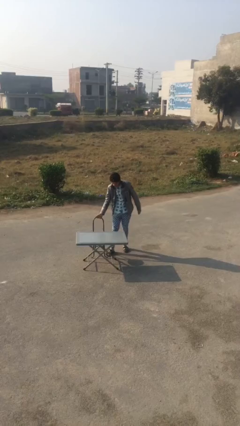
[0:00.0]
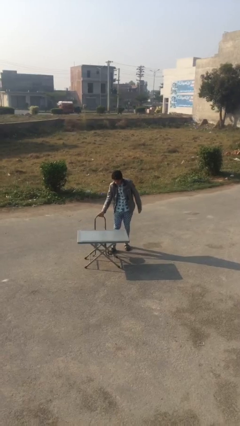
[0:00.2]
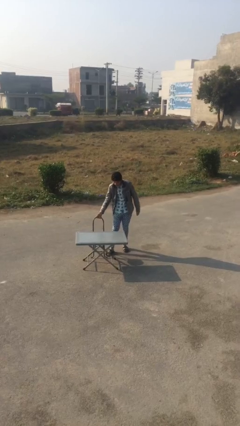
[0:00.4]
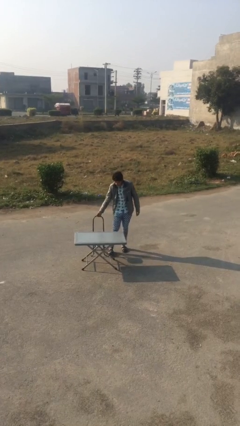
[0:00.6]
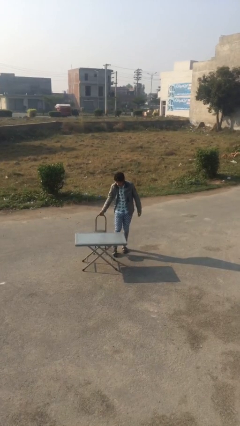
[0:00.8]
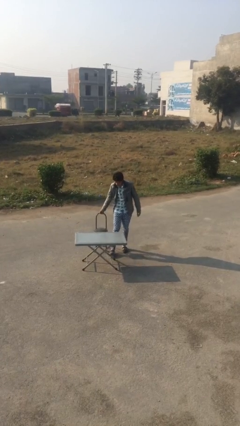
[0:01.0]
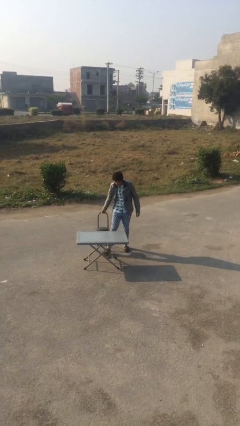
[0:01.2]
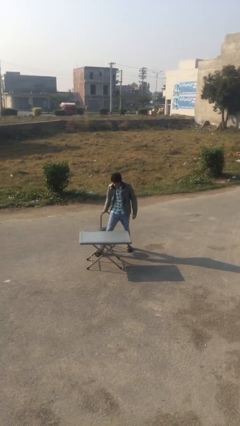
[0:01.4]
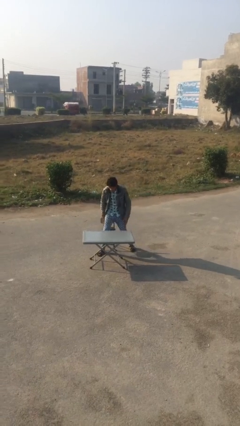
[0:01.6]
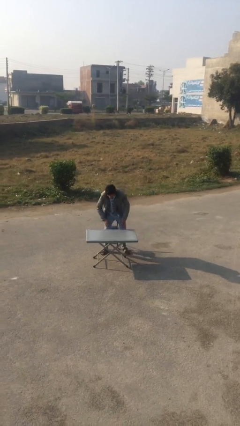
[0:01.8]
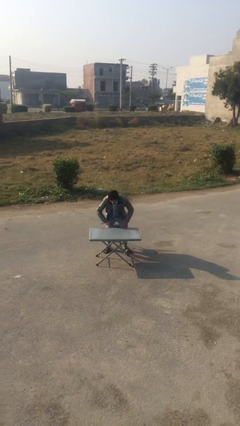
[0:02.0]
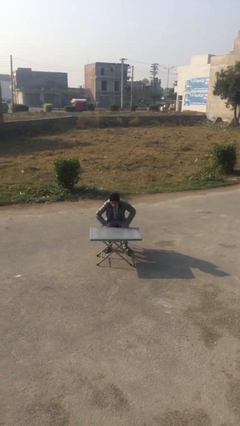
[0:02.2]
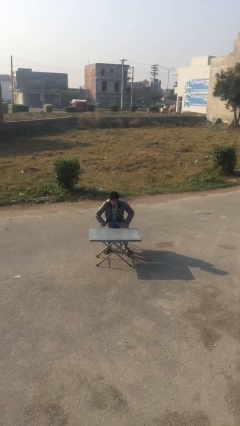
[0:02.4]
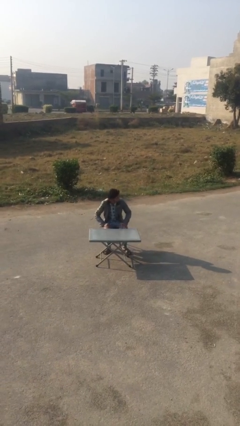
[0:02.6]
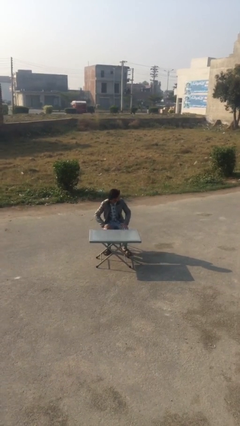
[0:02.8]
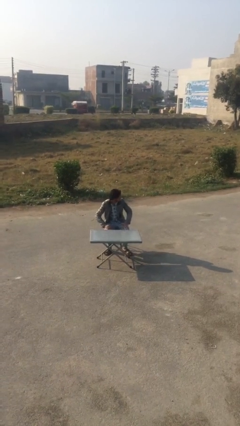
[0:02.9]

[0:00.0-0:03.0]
person sits down

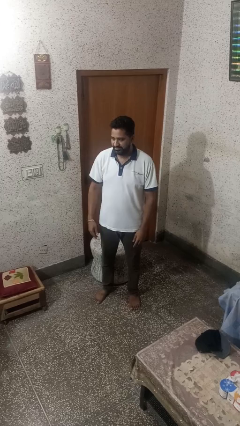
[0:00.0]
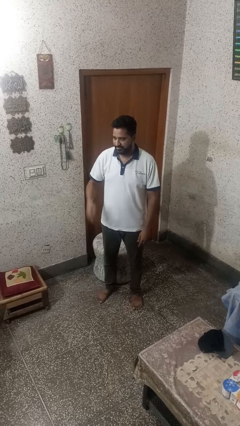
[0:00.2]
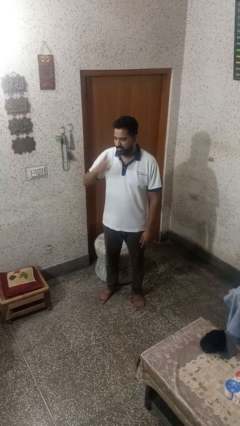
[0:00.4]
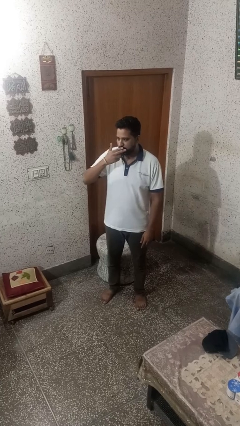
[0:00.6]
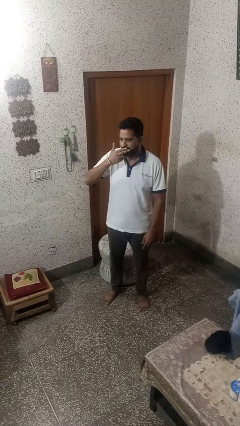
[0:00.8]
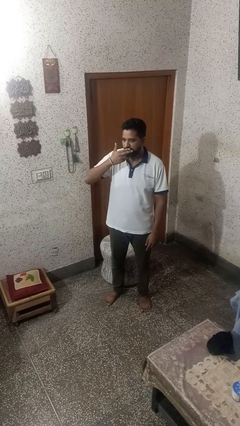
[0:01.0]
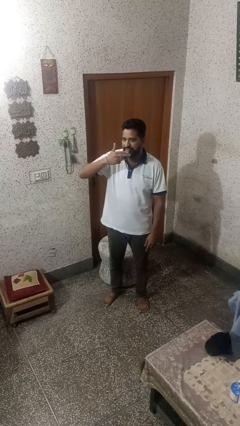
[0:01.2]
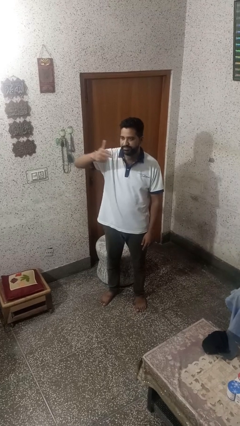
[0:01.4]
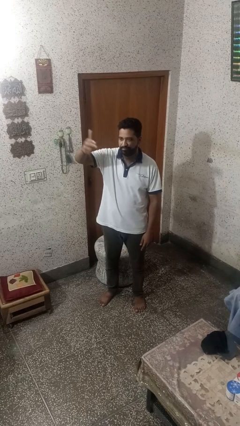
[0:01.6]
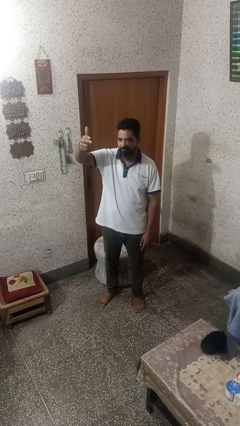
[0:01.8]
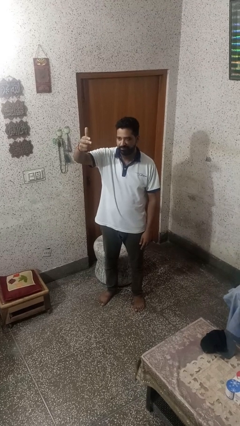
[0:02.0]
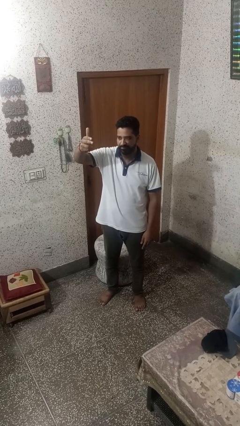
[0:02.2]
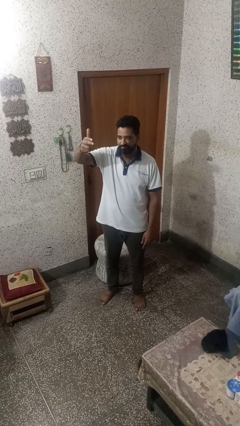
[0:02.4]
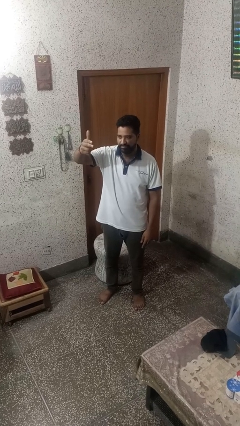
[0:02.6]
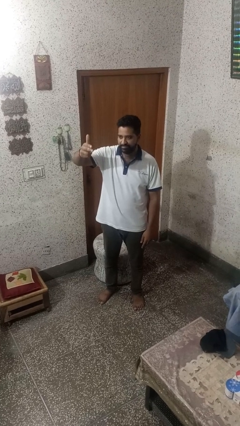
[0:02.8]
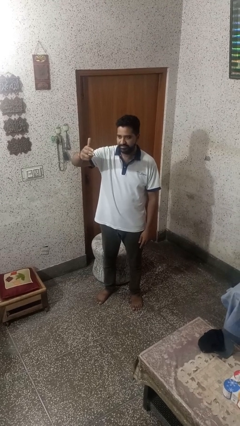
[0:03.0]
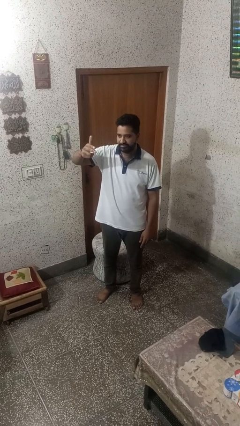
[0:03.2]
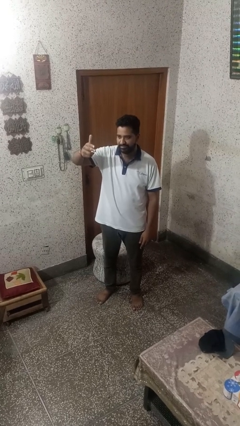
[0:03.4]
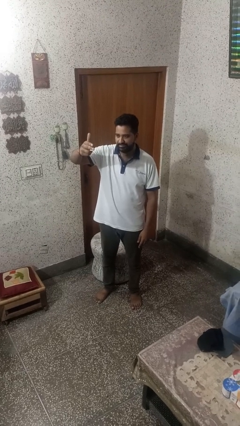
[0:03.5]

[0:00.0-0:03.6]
person gestures blow kiss

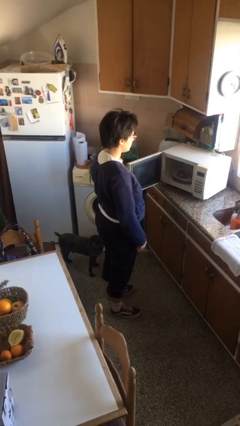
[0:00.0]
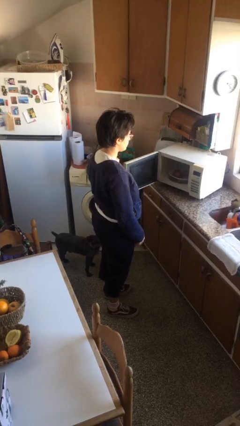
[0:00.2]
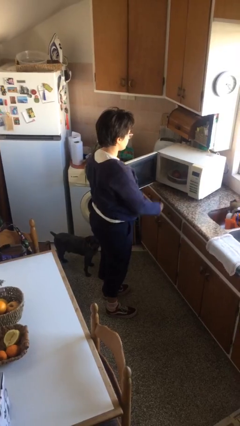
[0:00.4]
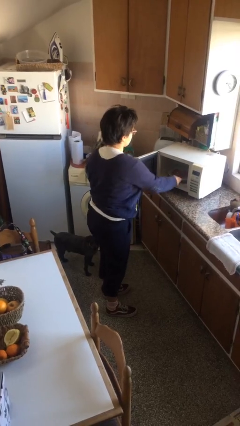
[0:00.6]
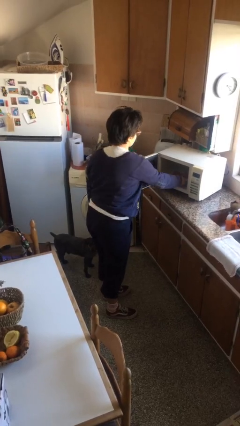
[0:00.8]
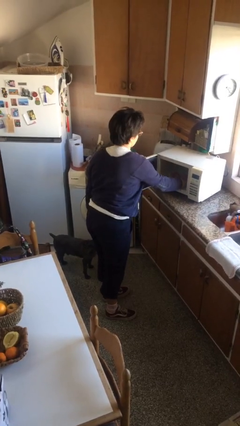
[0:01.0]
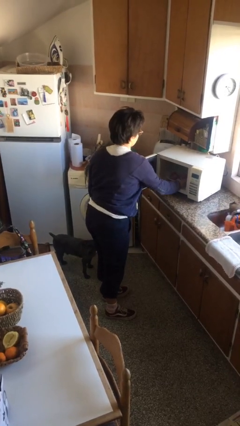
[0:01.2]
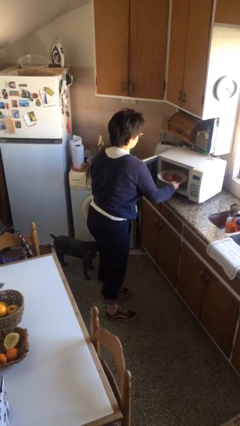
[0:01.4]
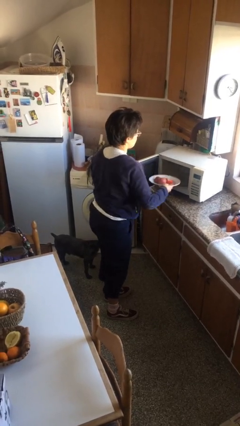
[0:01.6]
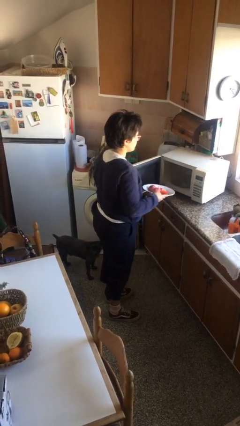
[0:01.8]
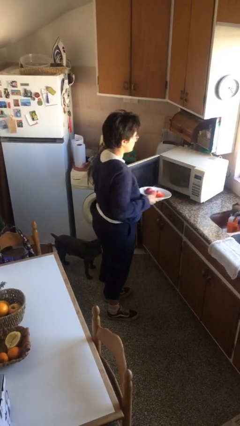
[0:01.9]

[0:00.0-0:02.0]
person takes object from microwave

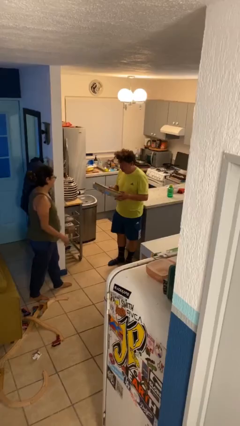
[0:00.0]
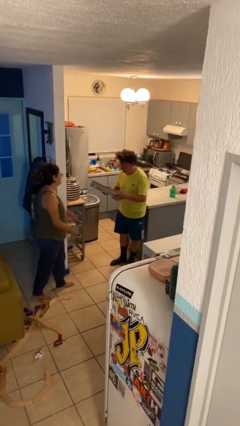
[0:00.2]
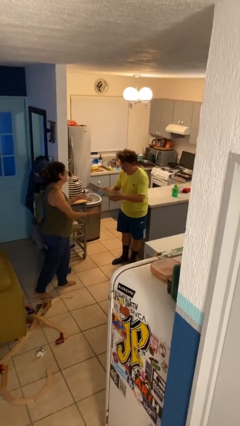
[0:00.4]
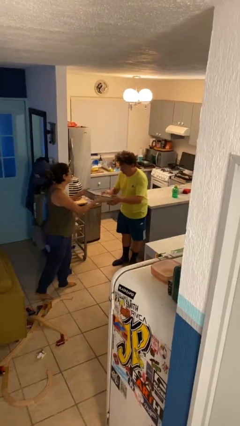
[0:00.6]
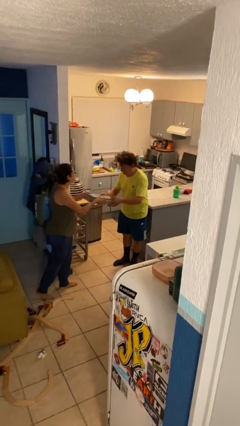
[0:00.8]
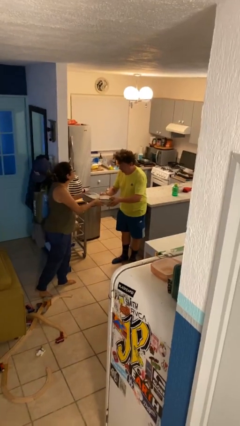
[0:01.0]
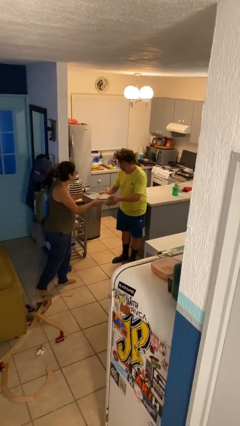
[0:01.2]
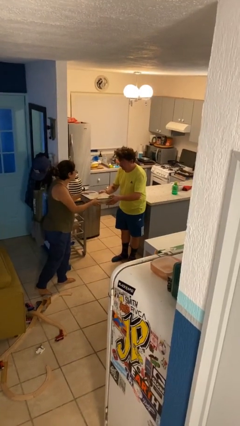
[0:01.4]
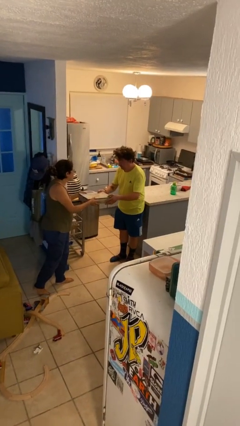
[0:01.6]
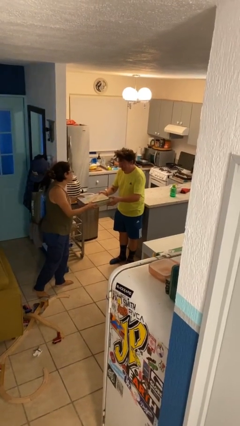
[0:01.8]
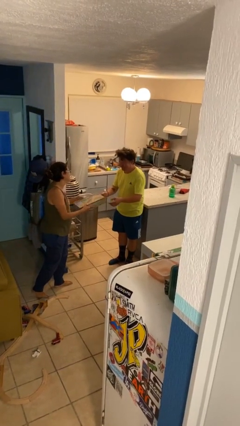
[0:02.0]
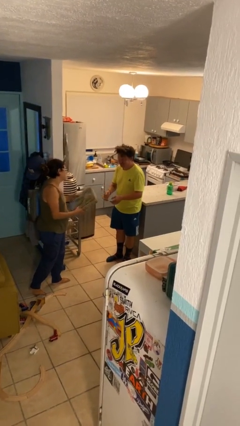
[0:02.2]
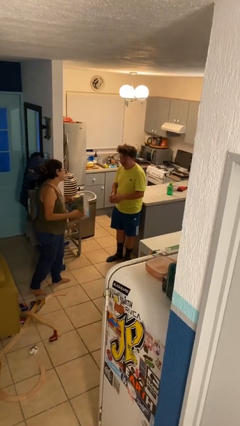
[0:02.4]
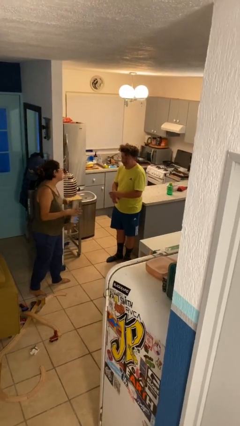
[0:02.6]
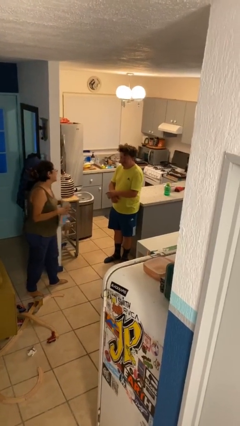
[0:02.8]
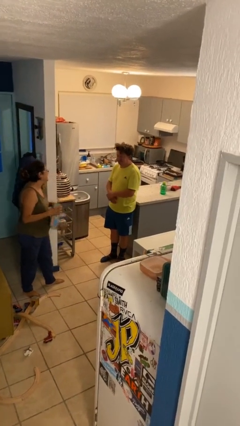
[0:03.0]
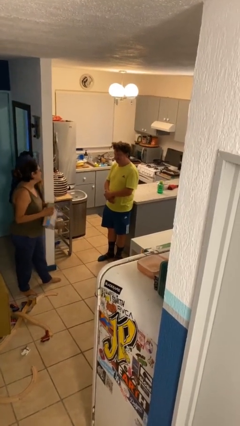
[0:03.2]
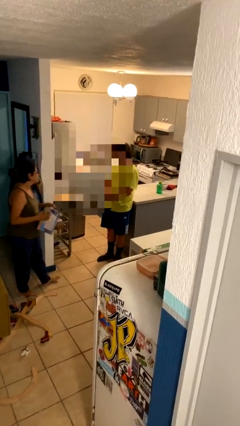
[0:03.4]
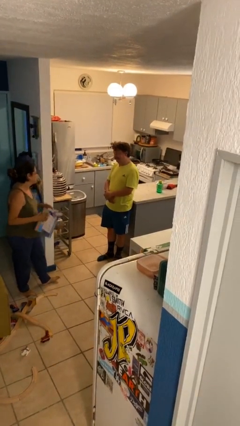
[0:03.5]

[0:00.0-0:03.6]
person transfers object to person

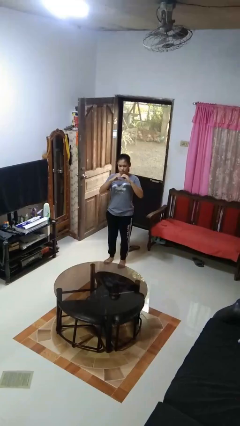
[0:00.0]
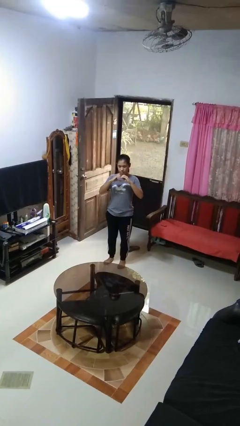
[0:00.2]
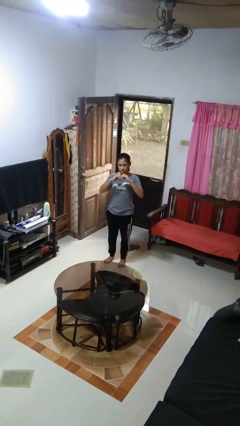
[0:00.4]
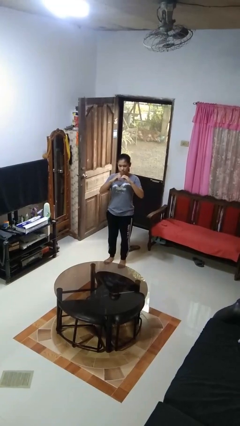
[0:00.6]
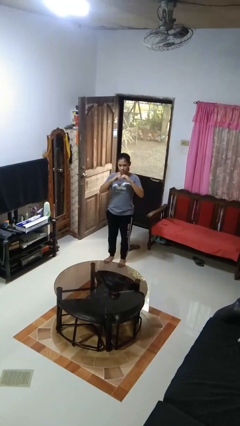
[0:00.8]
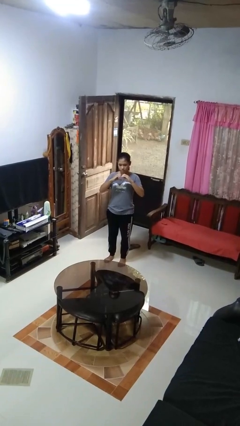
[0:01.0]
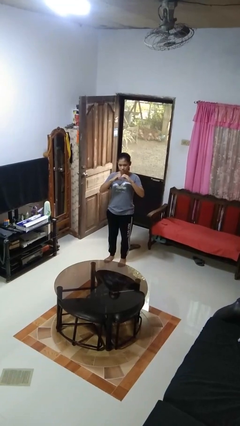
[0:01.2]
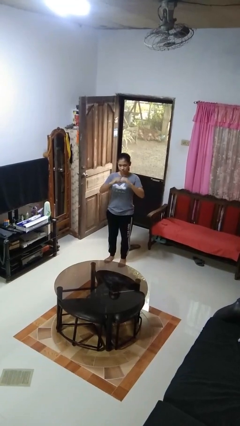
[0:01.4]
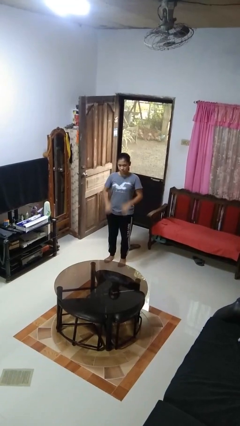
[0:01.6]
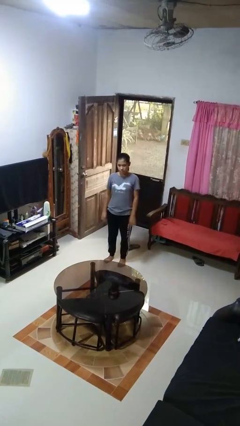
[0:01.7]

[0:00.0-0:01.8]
person gestures heart

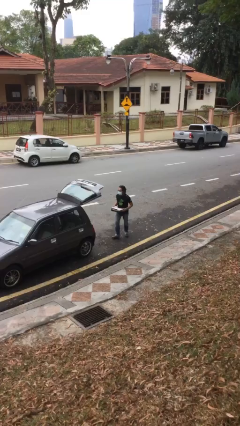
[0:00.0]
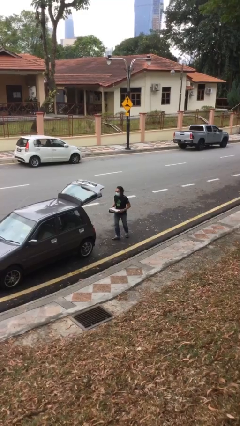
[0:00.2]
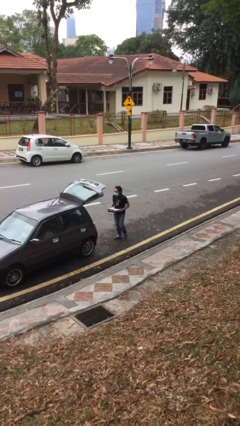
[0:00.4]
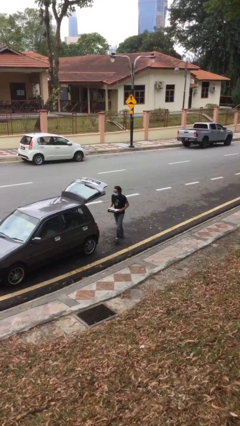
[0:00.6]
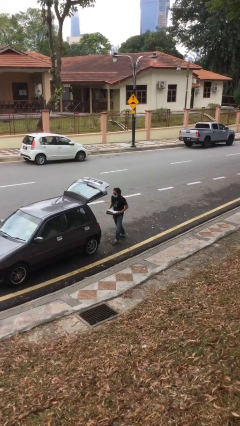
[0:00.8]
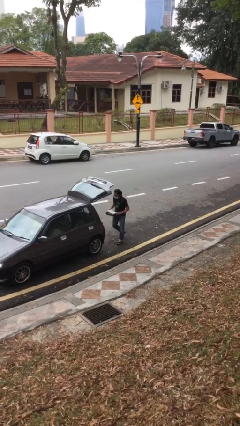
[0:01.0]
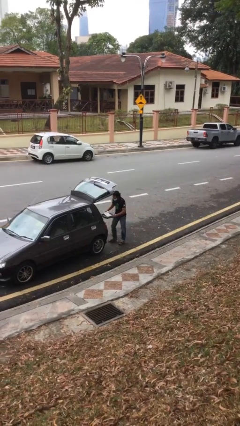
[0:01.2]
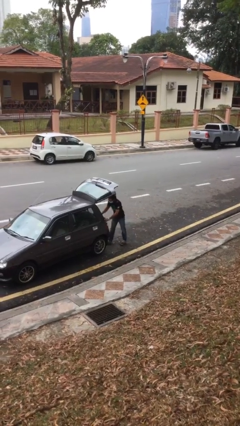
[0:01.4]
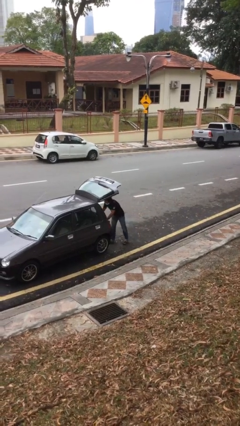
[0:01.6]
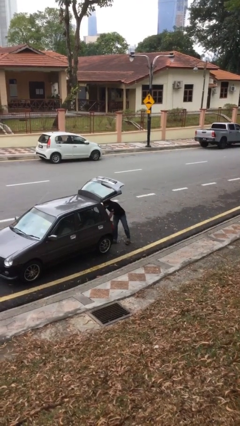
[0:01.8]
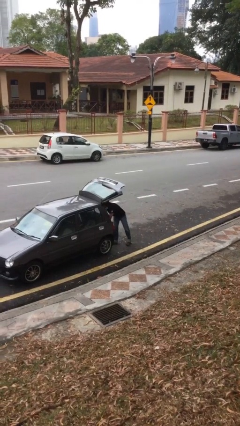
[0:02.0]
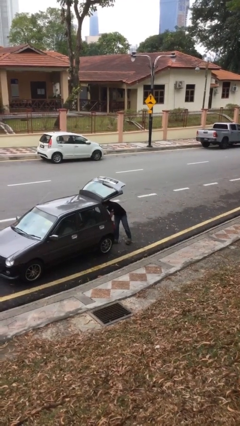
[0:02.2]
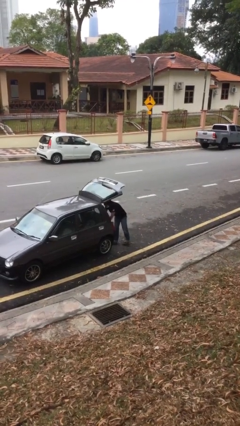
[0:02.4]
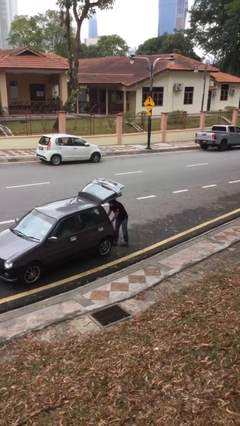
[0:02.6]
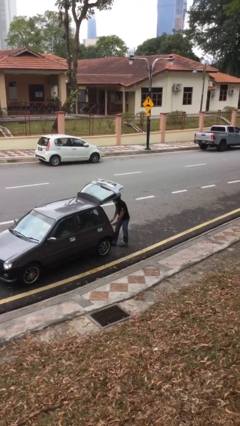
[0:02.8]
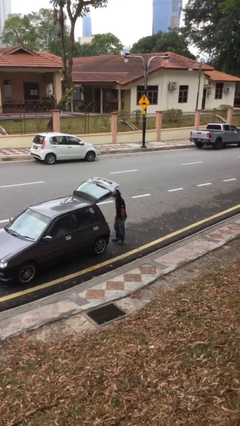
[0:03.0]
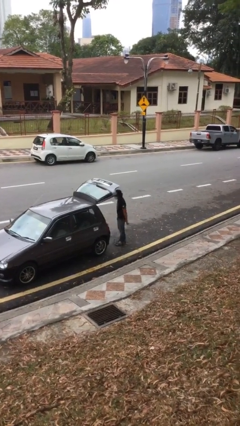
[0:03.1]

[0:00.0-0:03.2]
person loads car
